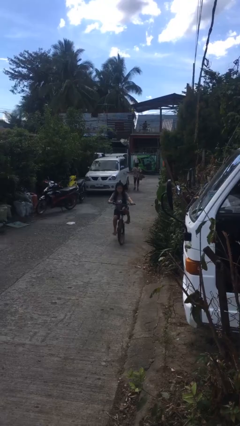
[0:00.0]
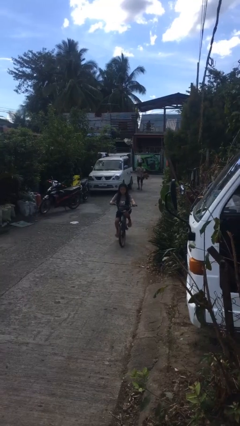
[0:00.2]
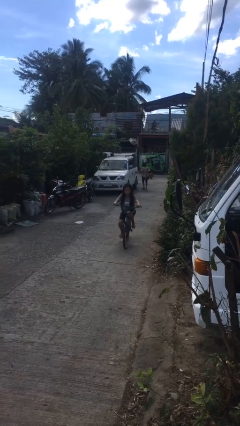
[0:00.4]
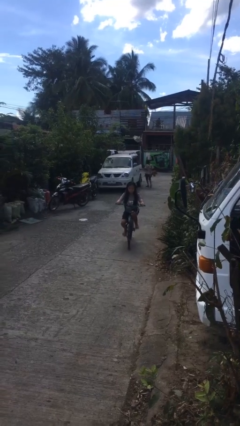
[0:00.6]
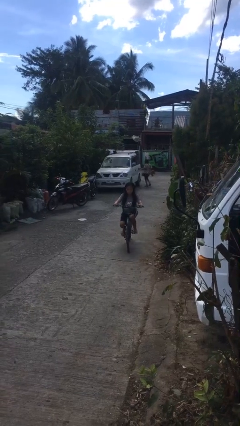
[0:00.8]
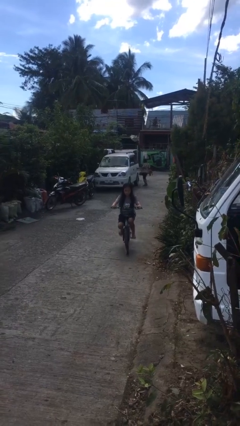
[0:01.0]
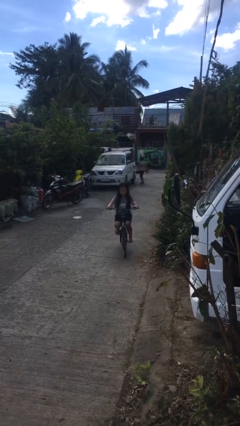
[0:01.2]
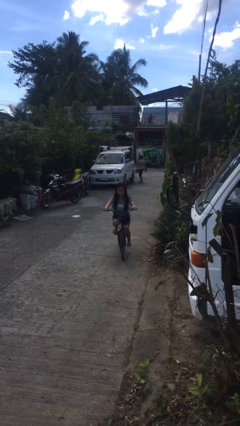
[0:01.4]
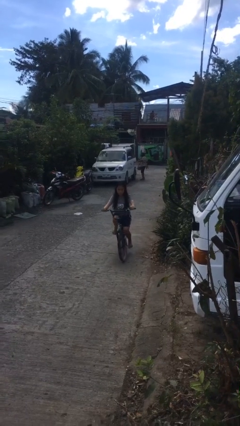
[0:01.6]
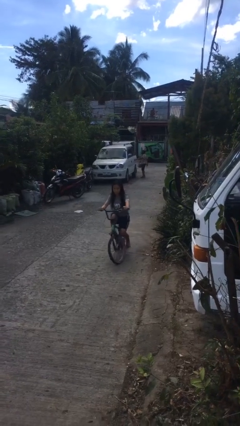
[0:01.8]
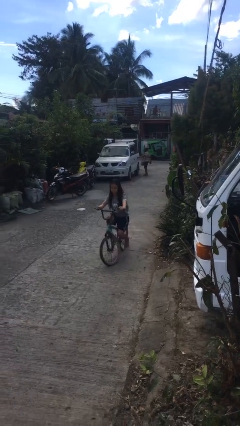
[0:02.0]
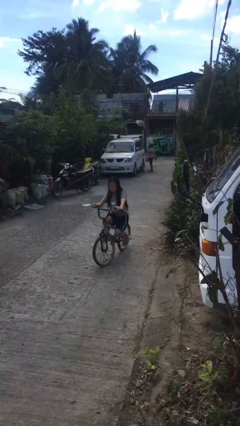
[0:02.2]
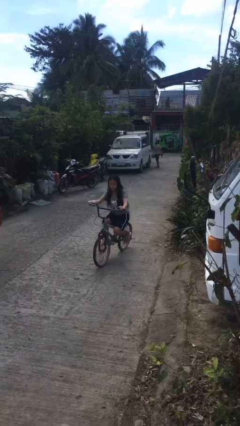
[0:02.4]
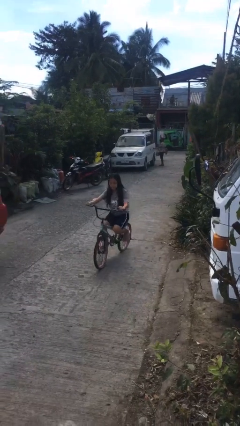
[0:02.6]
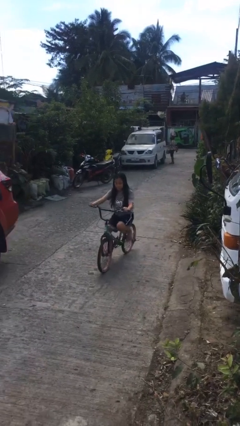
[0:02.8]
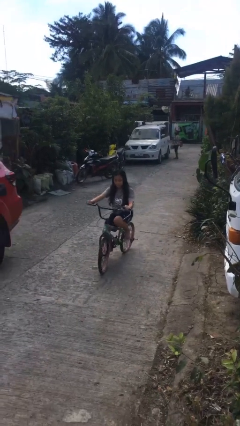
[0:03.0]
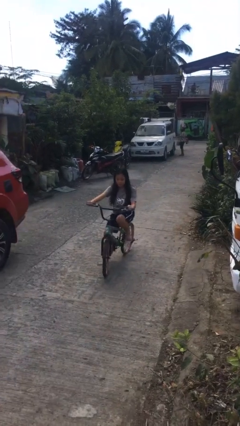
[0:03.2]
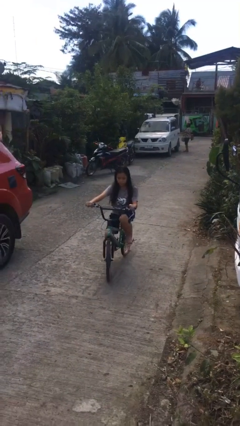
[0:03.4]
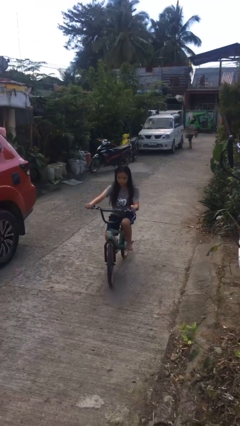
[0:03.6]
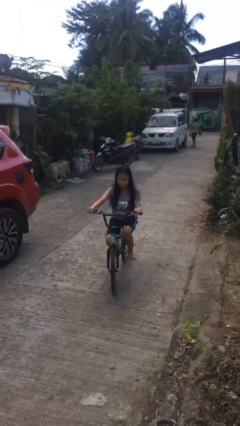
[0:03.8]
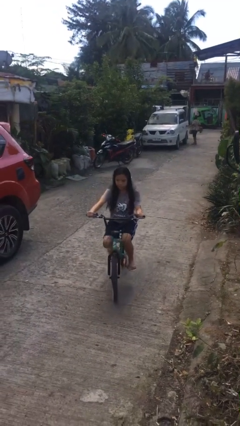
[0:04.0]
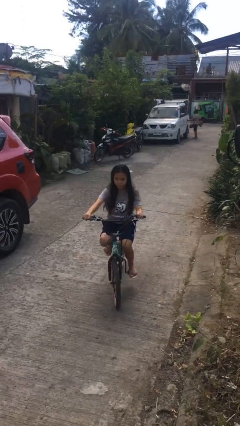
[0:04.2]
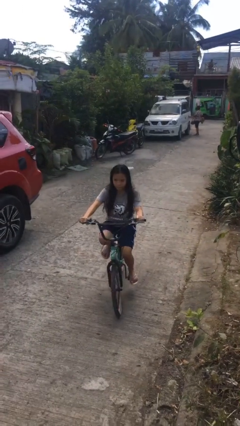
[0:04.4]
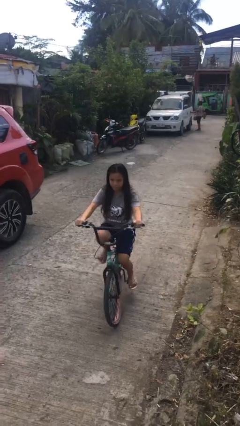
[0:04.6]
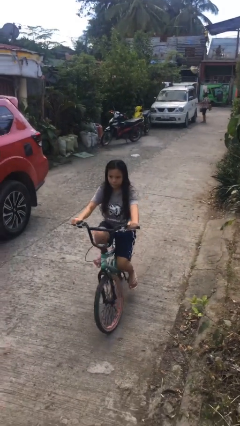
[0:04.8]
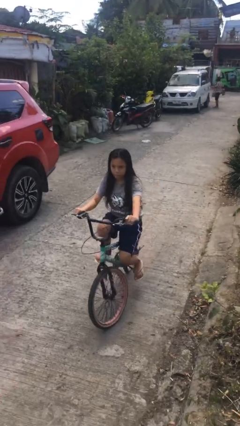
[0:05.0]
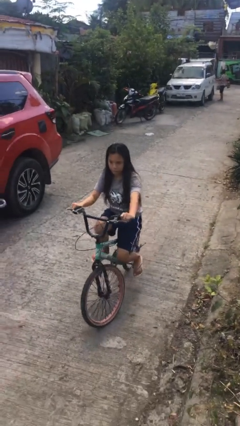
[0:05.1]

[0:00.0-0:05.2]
person rides bicycle

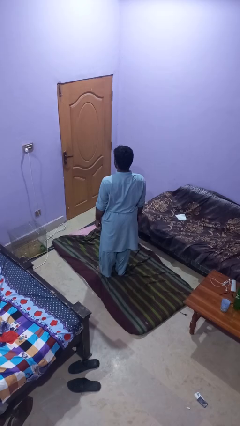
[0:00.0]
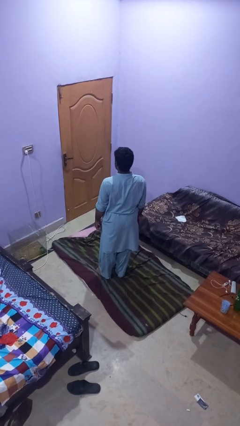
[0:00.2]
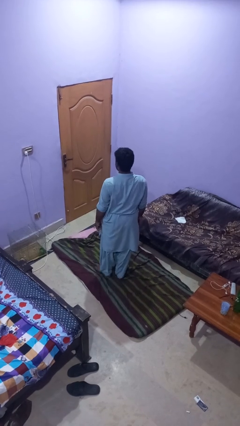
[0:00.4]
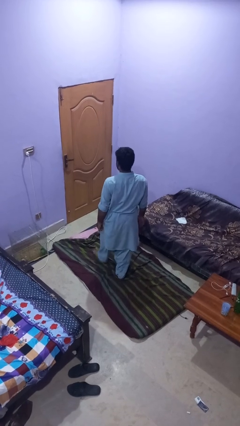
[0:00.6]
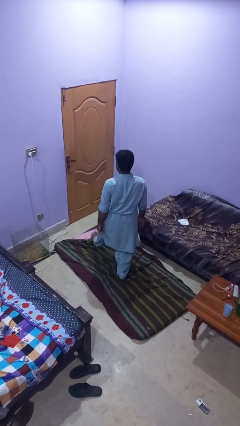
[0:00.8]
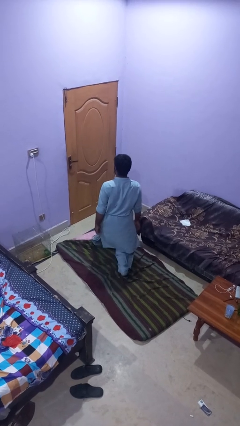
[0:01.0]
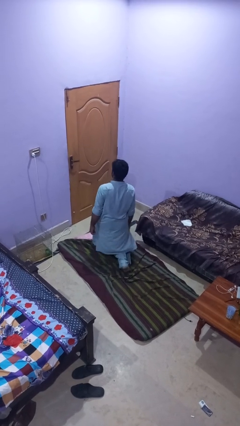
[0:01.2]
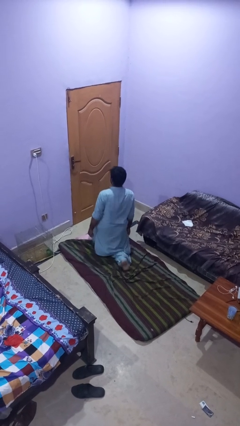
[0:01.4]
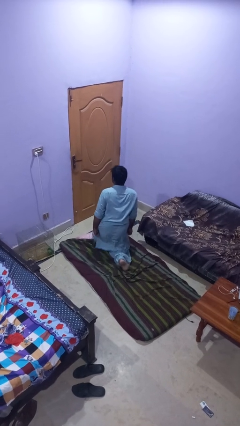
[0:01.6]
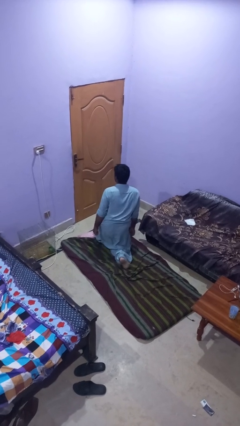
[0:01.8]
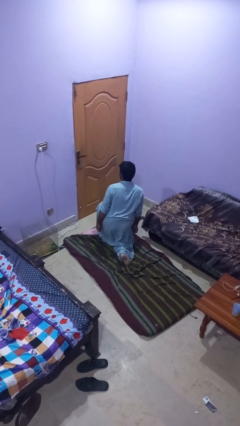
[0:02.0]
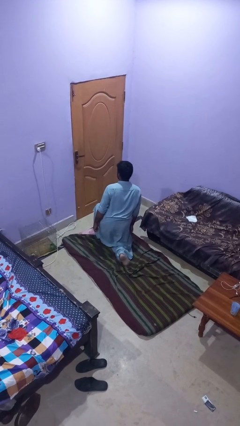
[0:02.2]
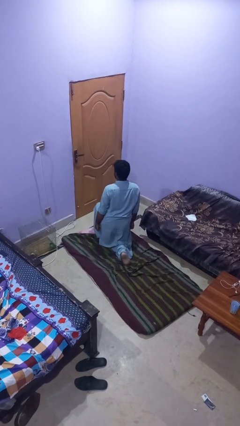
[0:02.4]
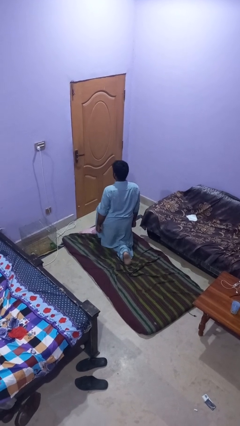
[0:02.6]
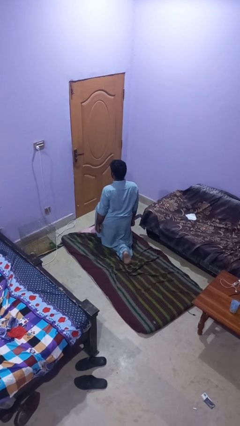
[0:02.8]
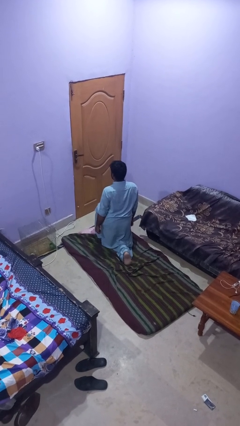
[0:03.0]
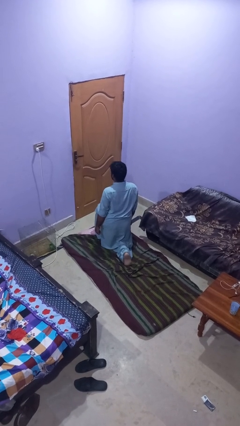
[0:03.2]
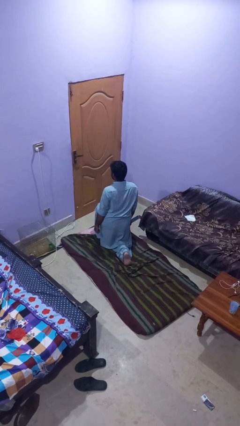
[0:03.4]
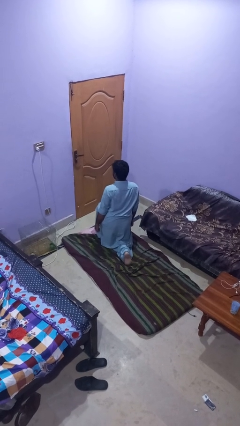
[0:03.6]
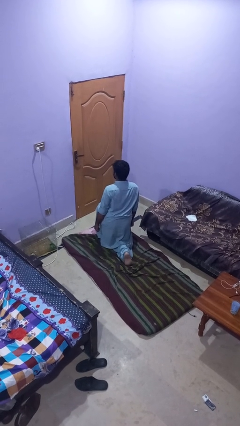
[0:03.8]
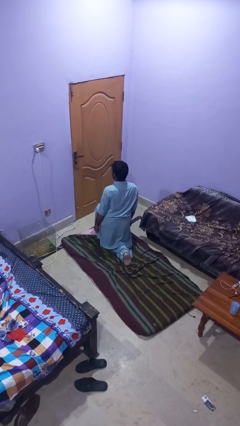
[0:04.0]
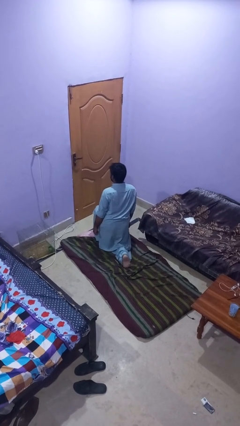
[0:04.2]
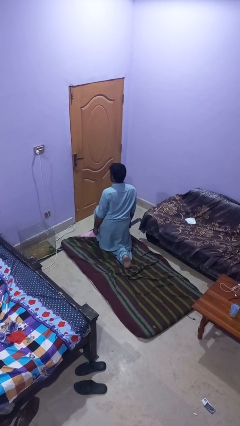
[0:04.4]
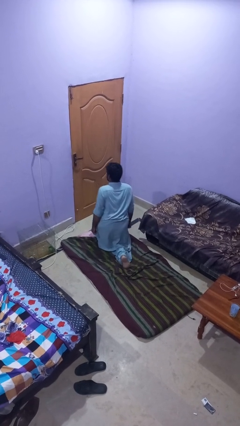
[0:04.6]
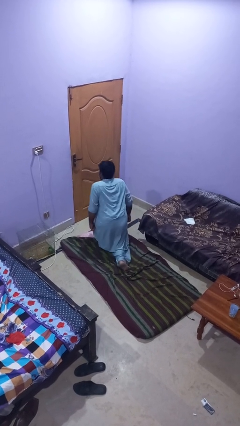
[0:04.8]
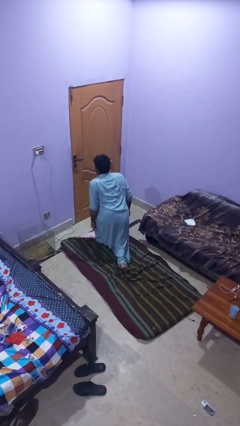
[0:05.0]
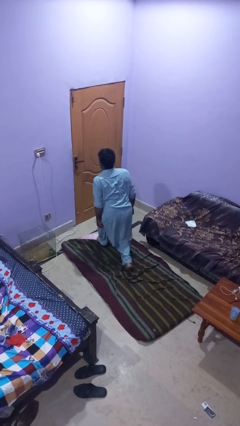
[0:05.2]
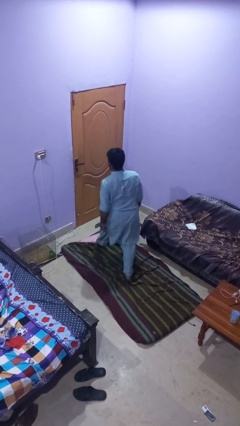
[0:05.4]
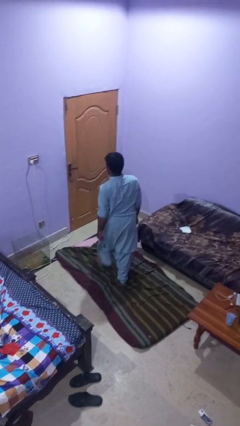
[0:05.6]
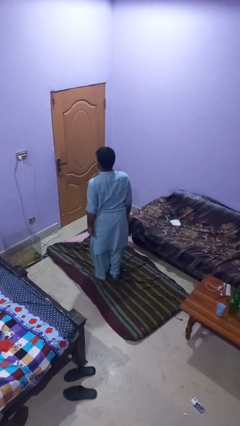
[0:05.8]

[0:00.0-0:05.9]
person exercises with lunges

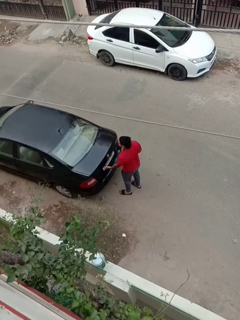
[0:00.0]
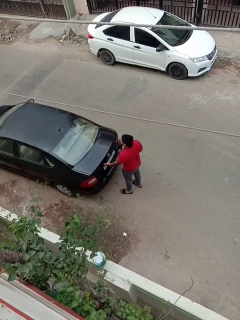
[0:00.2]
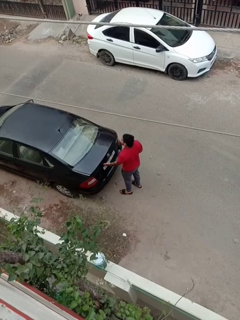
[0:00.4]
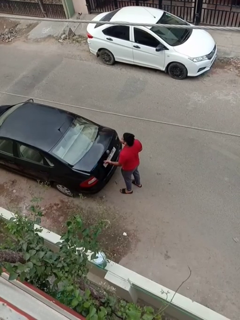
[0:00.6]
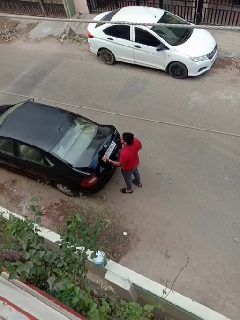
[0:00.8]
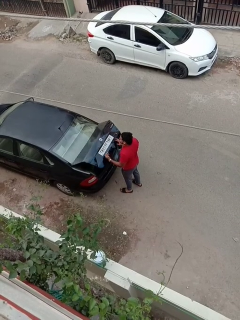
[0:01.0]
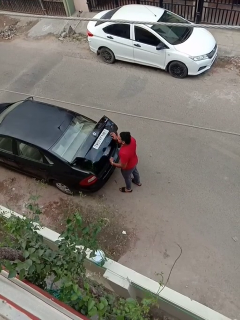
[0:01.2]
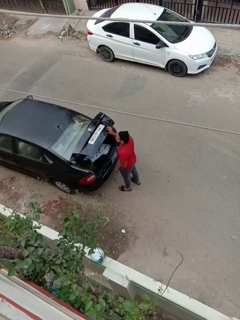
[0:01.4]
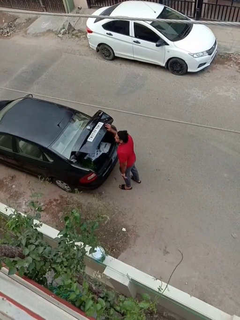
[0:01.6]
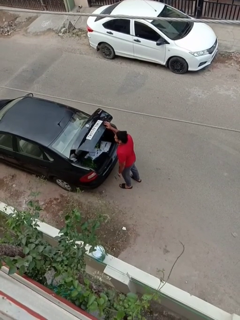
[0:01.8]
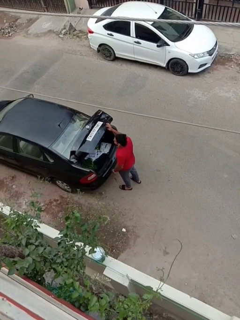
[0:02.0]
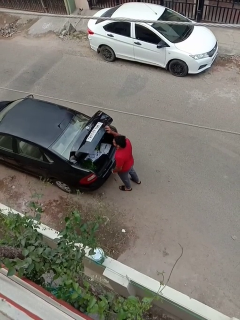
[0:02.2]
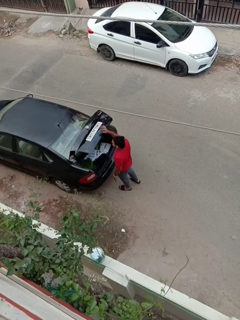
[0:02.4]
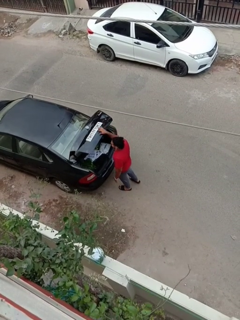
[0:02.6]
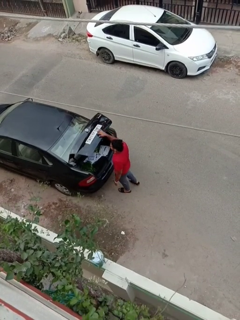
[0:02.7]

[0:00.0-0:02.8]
person opens car trunk

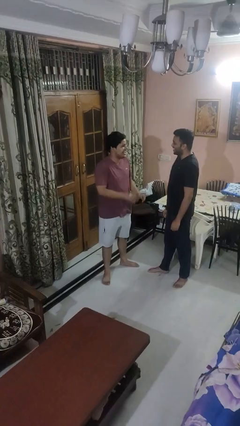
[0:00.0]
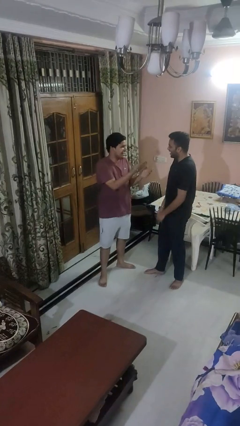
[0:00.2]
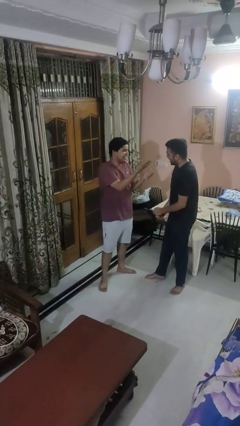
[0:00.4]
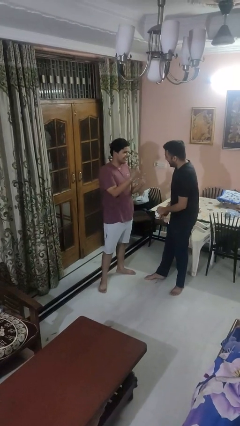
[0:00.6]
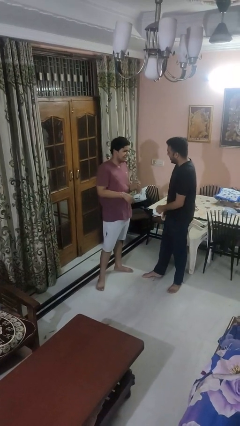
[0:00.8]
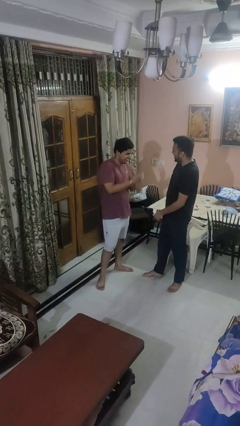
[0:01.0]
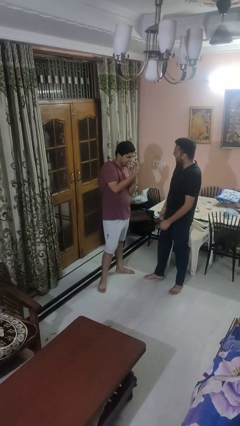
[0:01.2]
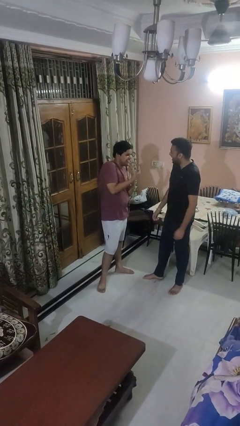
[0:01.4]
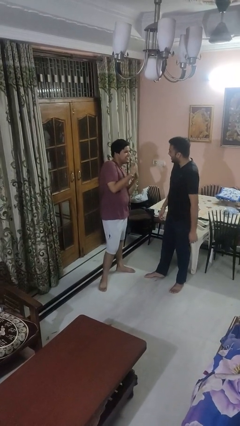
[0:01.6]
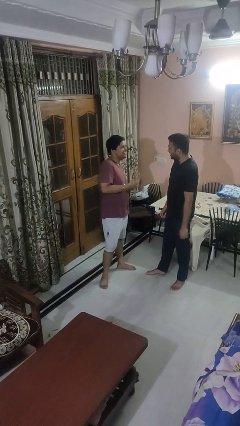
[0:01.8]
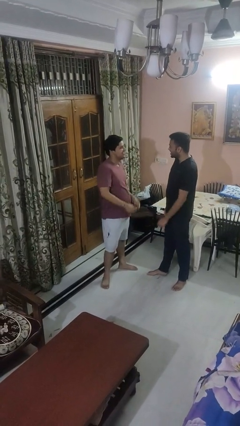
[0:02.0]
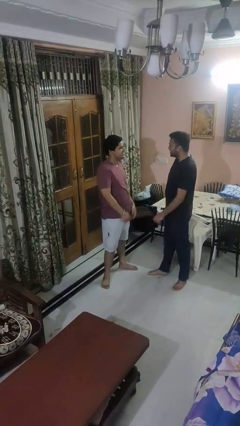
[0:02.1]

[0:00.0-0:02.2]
person laughs with person

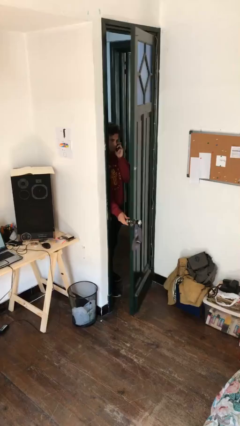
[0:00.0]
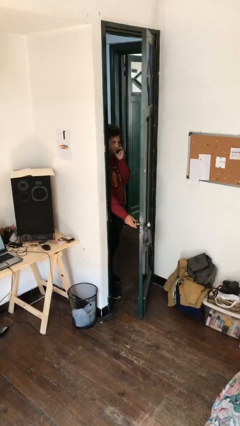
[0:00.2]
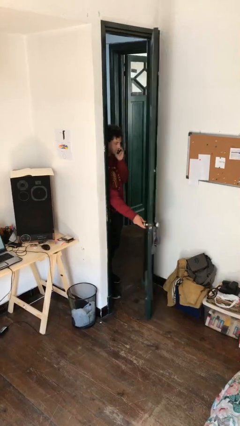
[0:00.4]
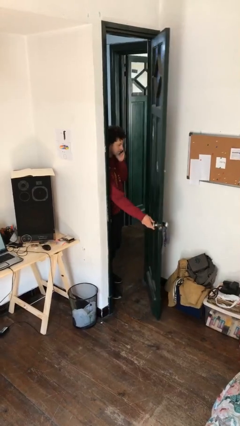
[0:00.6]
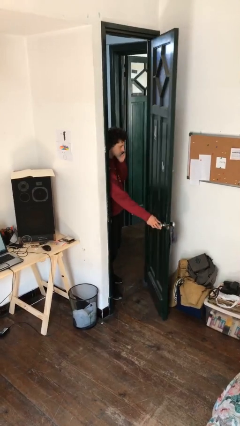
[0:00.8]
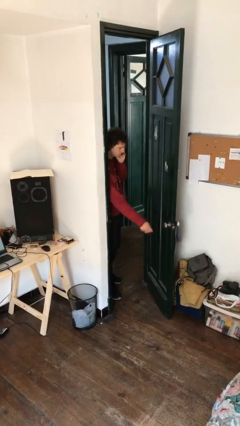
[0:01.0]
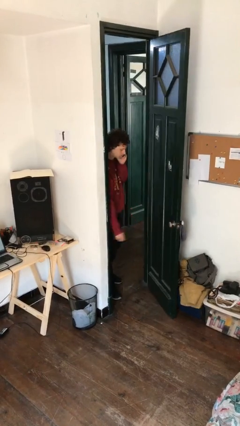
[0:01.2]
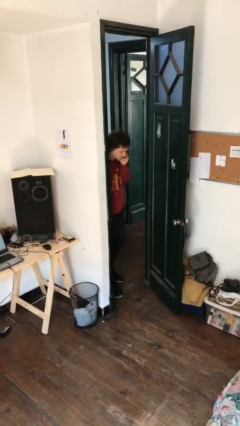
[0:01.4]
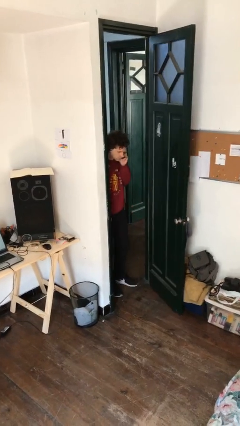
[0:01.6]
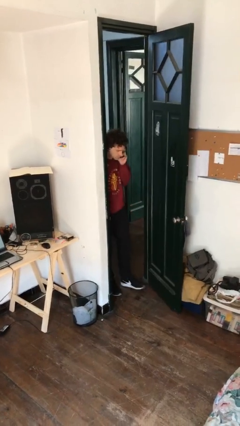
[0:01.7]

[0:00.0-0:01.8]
person opens facility door

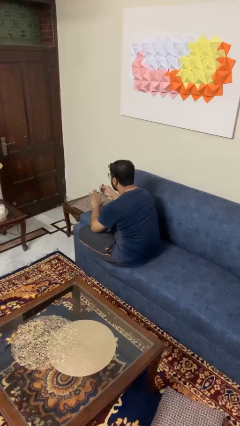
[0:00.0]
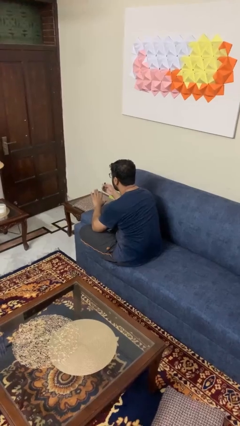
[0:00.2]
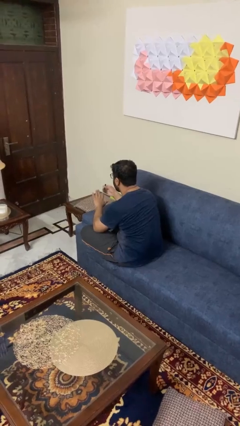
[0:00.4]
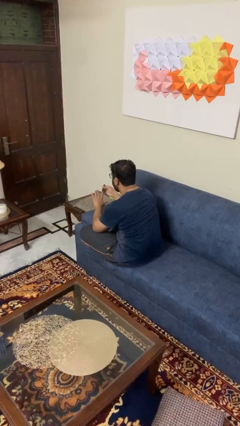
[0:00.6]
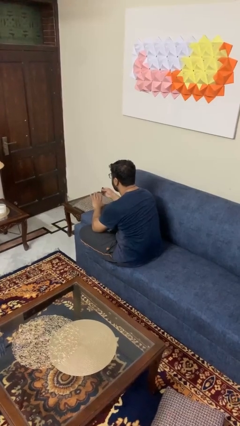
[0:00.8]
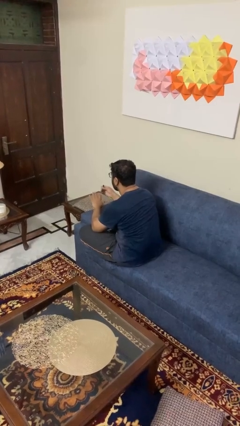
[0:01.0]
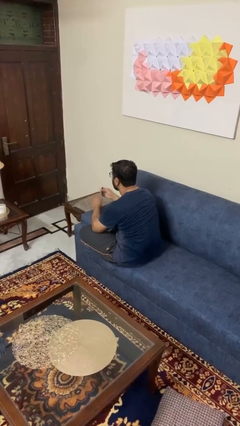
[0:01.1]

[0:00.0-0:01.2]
person clips fingernails
